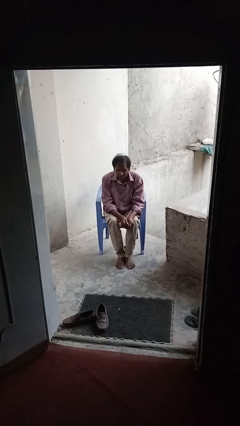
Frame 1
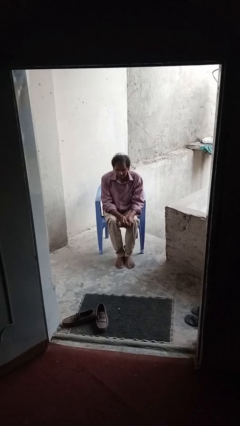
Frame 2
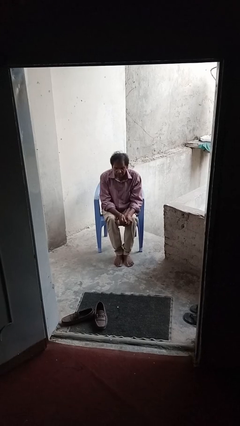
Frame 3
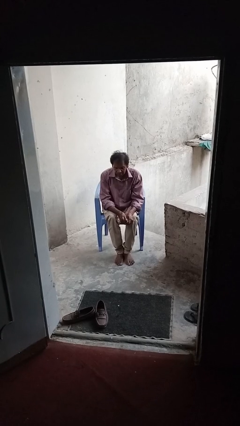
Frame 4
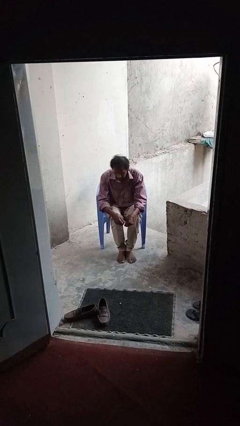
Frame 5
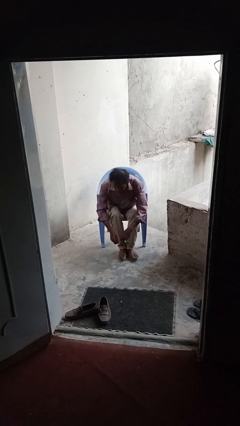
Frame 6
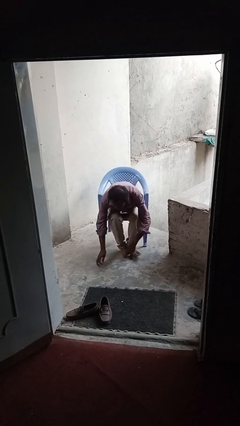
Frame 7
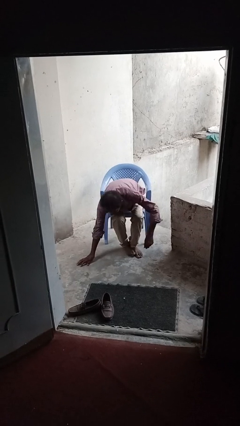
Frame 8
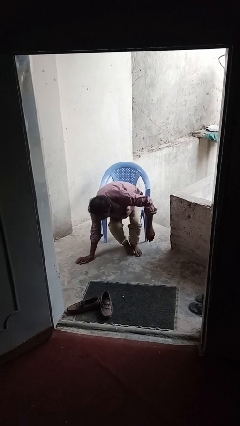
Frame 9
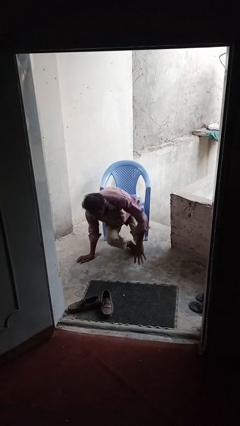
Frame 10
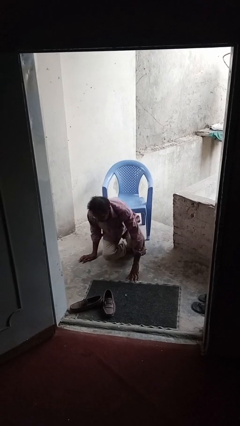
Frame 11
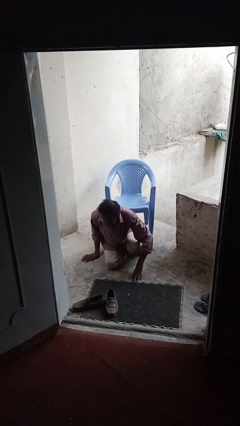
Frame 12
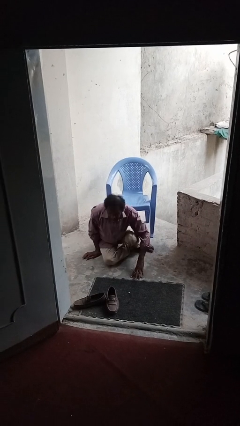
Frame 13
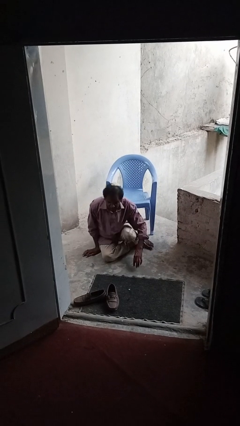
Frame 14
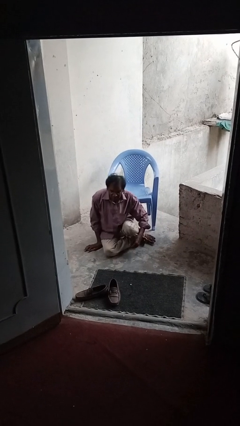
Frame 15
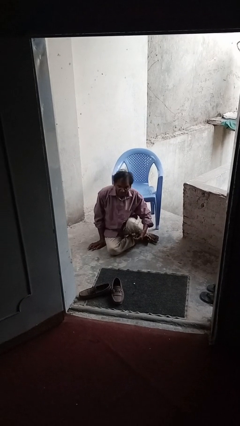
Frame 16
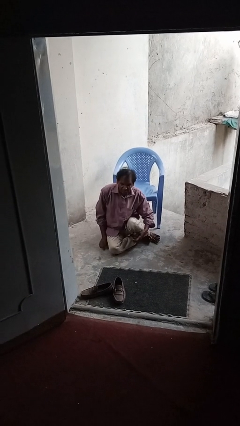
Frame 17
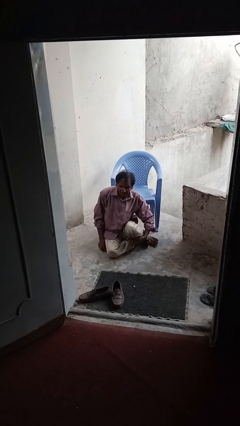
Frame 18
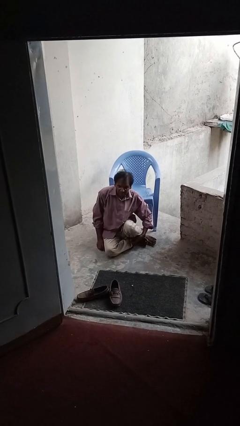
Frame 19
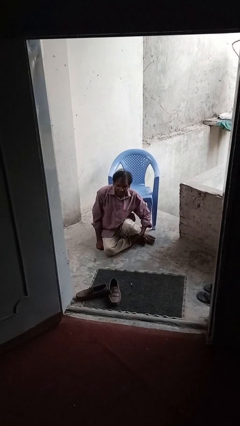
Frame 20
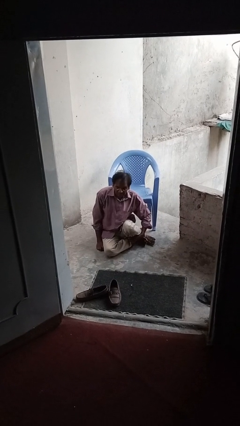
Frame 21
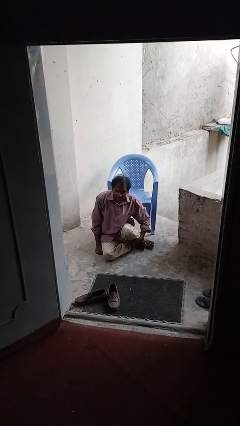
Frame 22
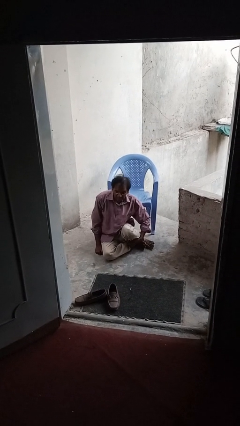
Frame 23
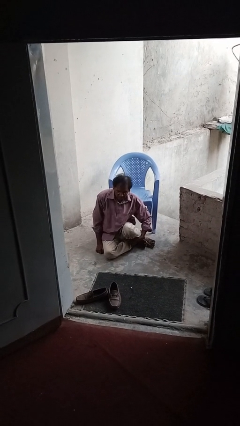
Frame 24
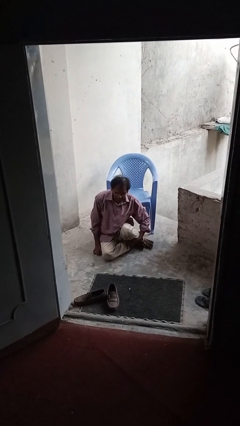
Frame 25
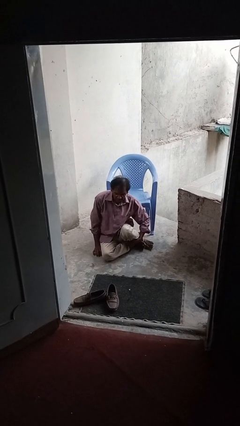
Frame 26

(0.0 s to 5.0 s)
person falls from chair

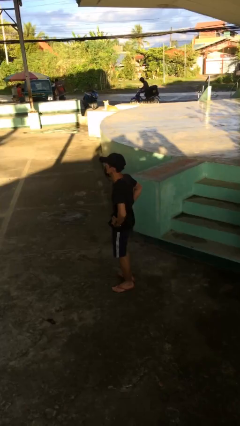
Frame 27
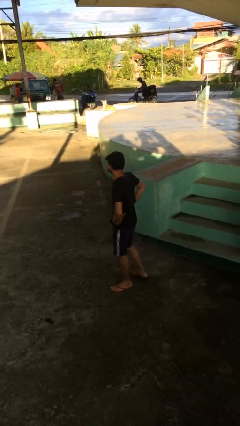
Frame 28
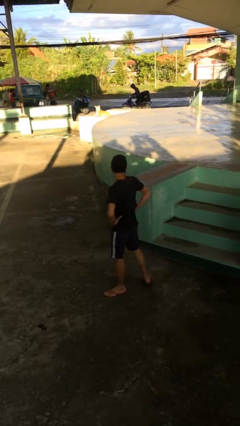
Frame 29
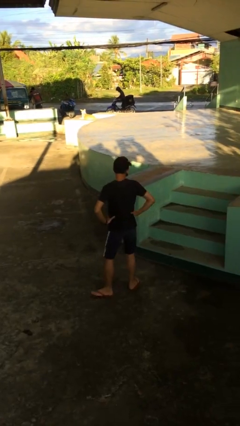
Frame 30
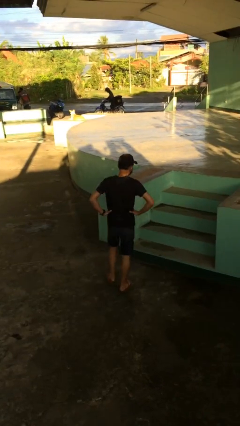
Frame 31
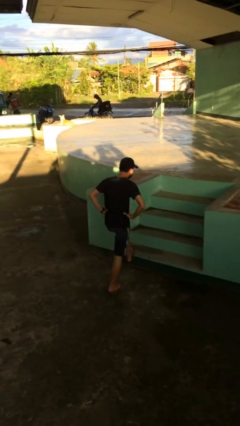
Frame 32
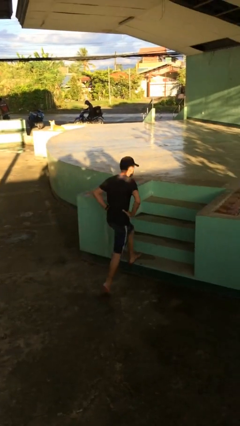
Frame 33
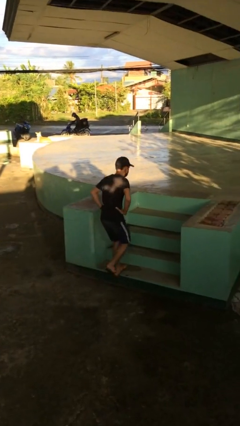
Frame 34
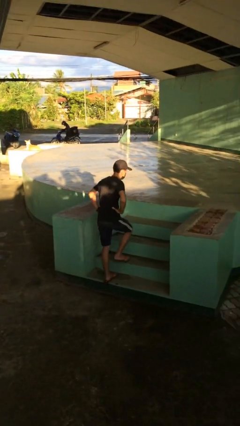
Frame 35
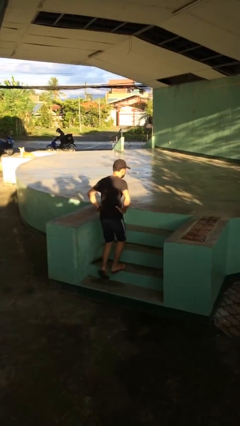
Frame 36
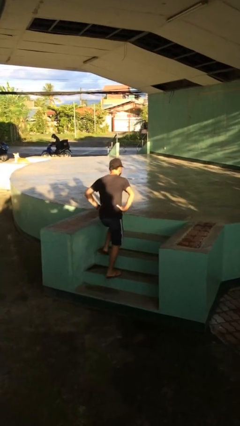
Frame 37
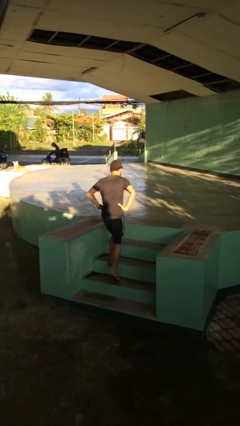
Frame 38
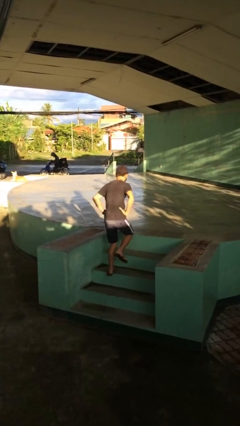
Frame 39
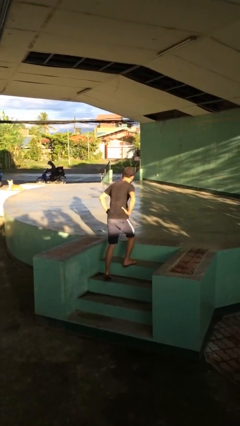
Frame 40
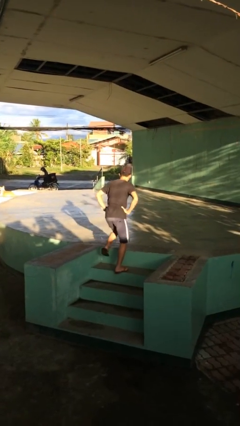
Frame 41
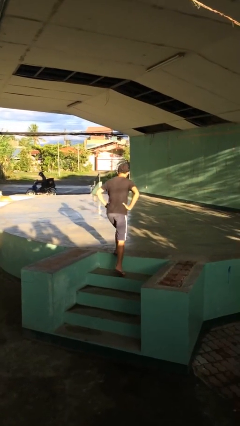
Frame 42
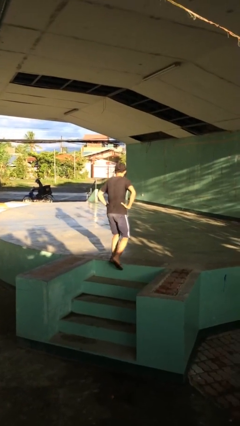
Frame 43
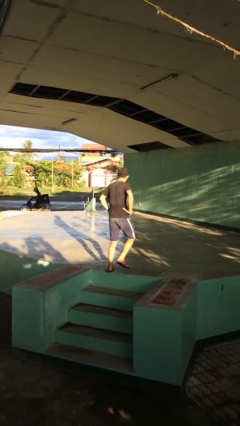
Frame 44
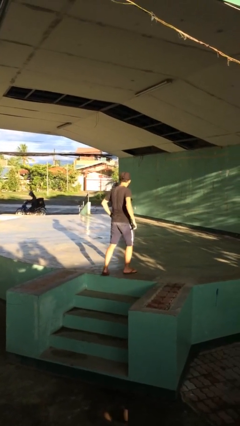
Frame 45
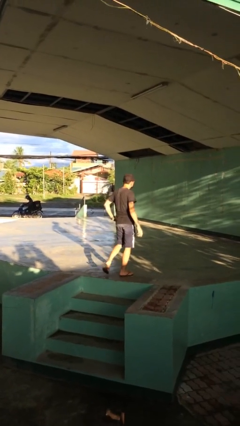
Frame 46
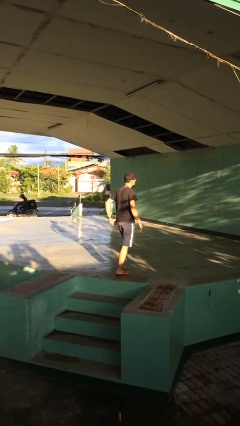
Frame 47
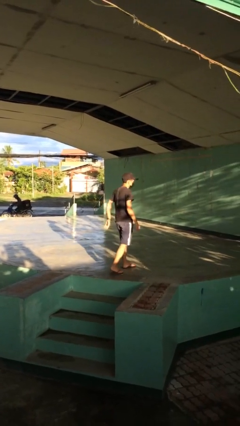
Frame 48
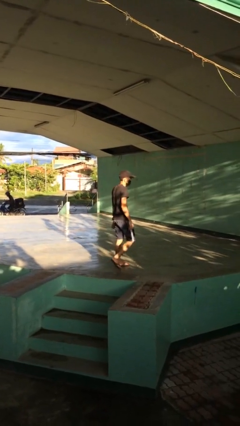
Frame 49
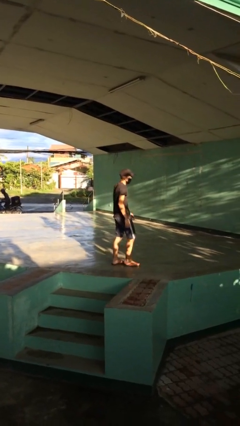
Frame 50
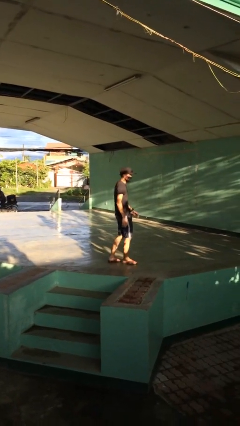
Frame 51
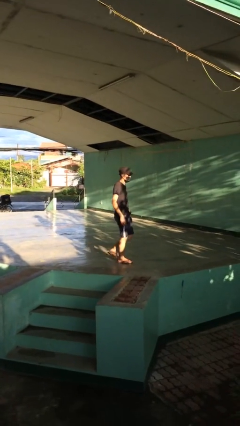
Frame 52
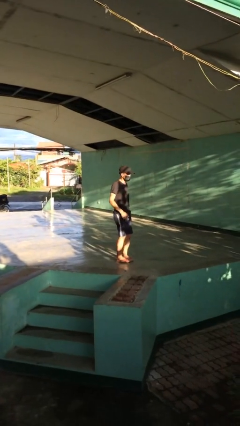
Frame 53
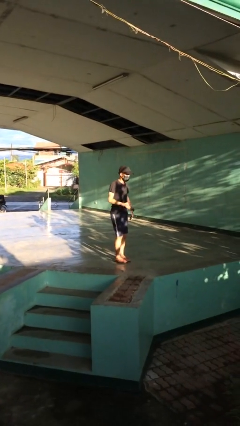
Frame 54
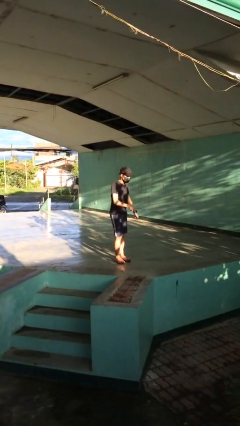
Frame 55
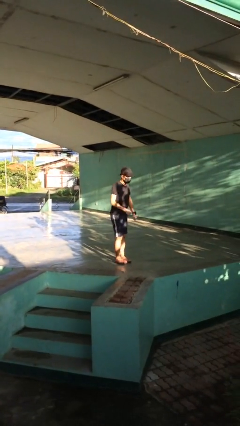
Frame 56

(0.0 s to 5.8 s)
person climbs up stairs

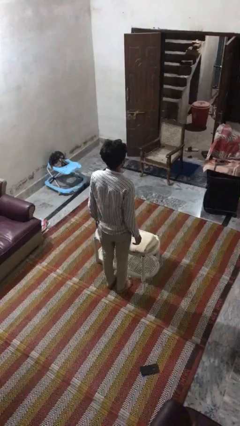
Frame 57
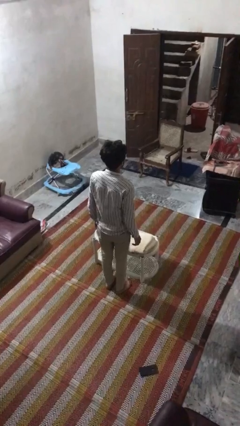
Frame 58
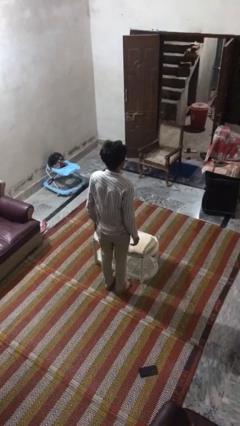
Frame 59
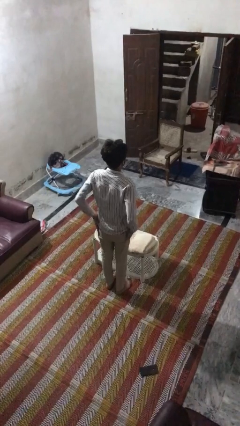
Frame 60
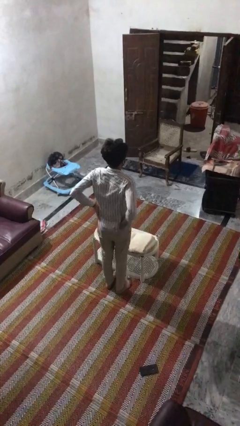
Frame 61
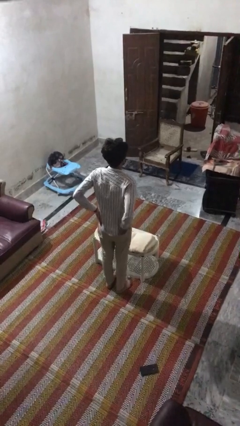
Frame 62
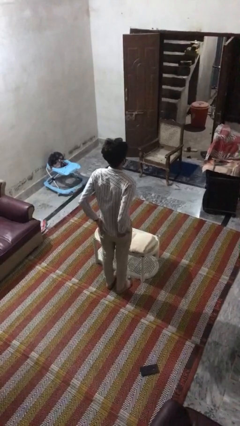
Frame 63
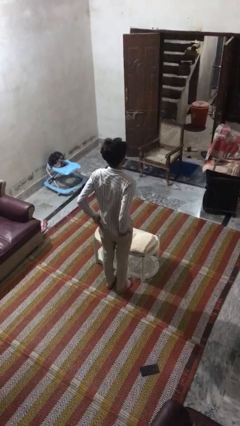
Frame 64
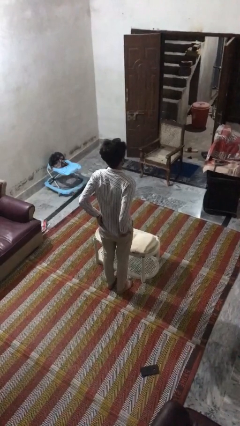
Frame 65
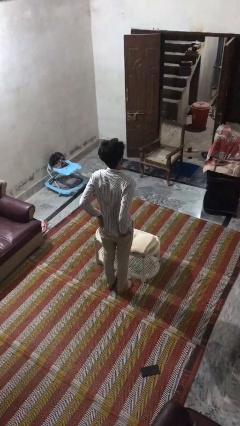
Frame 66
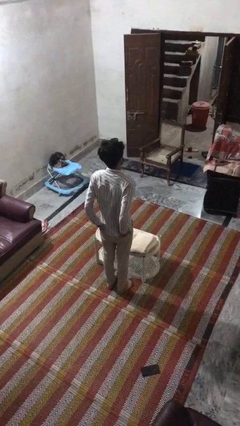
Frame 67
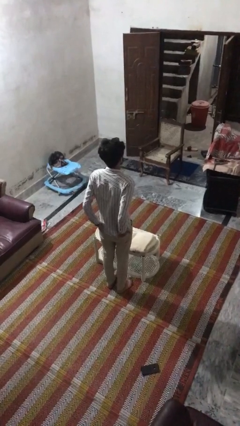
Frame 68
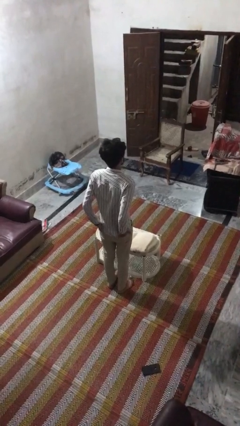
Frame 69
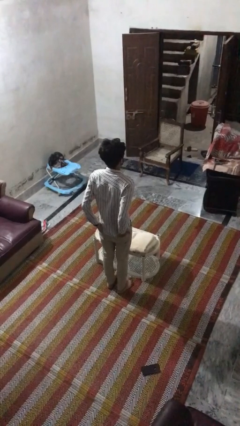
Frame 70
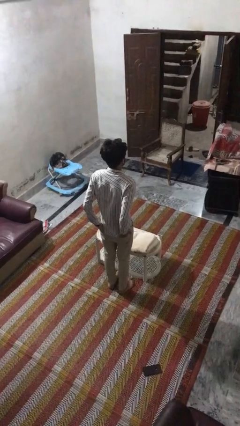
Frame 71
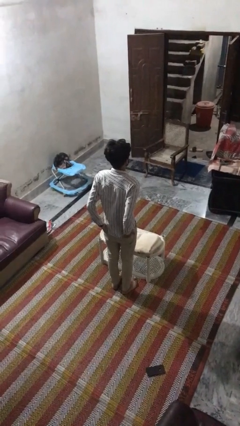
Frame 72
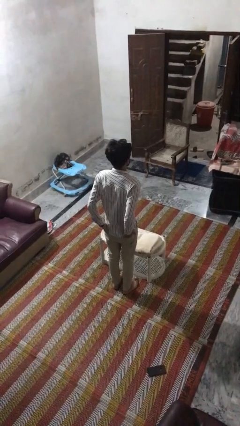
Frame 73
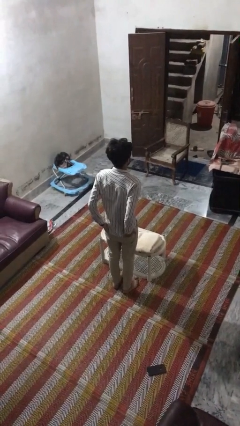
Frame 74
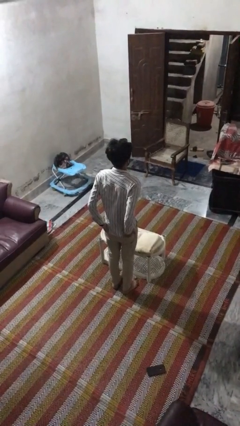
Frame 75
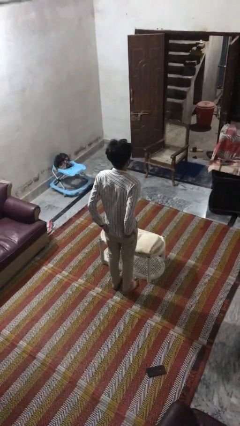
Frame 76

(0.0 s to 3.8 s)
person puts hands in back pockets

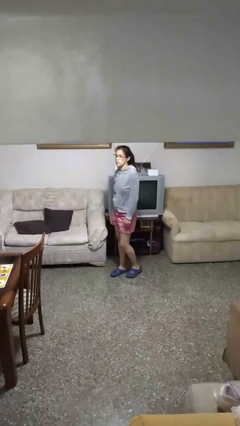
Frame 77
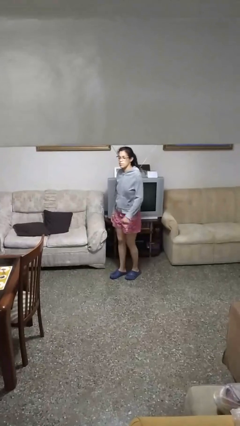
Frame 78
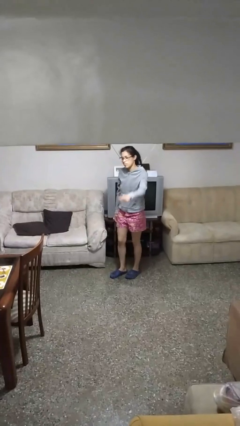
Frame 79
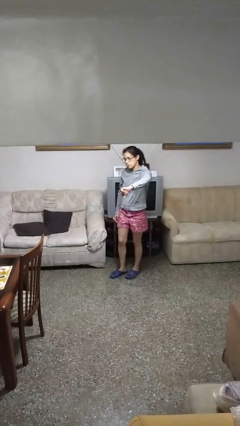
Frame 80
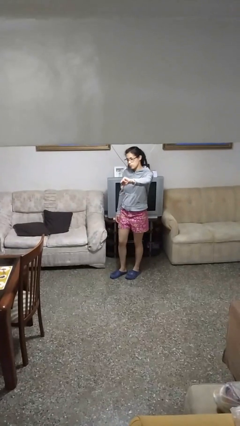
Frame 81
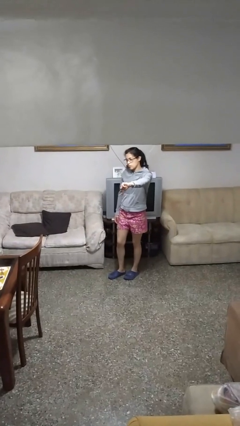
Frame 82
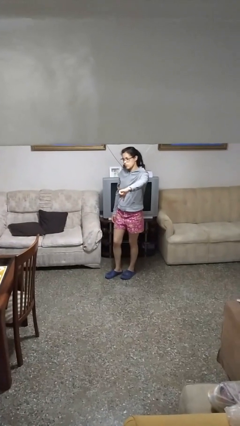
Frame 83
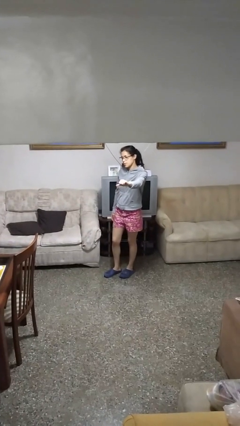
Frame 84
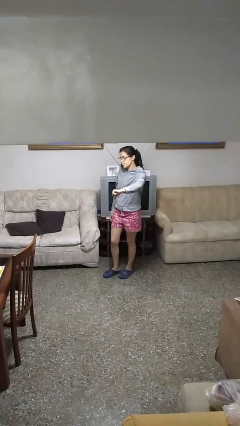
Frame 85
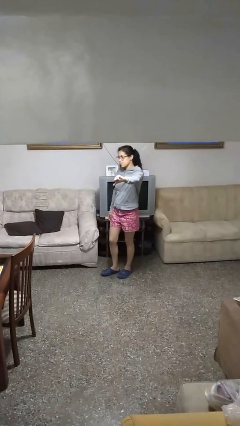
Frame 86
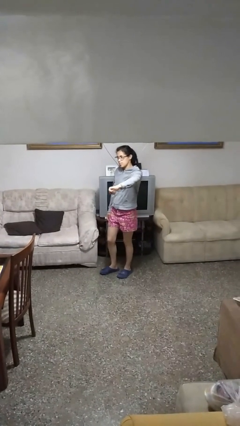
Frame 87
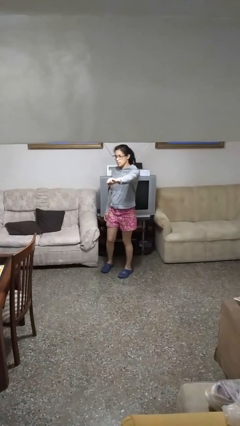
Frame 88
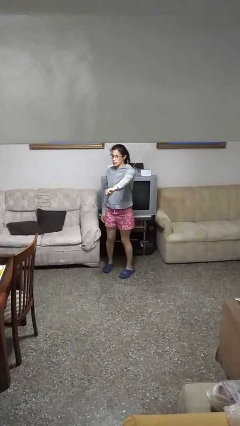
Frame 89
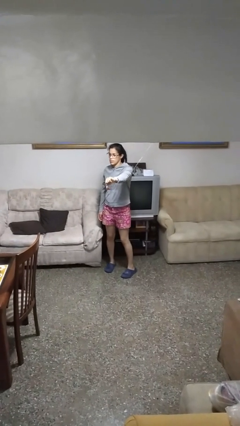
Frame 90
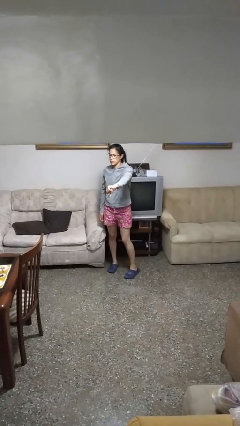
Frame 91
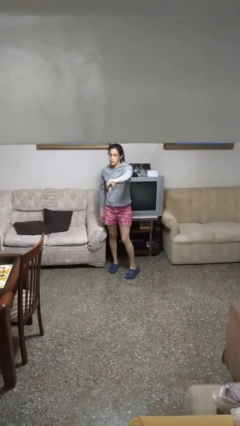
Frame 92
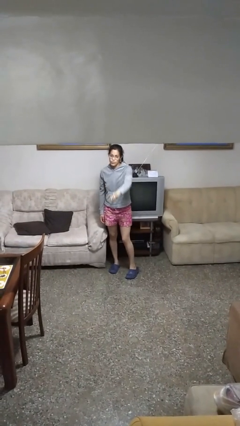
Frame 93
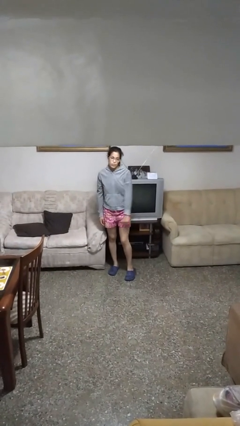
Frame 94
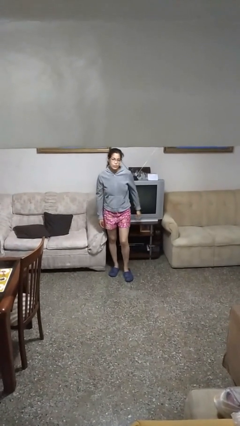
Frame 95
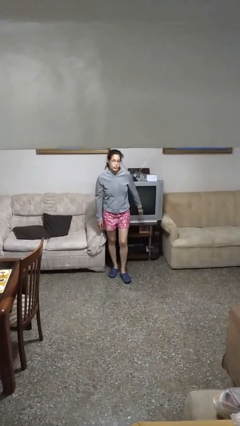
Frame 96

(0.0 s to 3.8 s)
person gestures thumbs down
